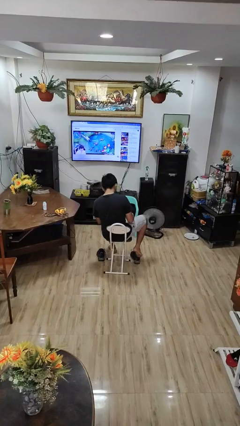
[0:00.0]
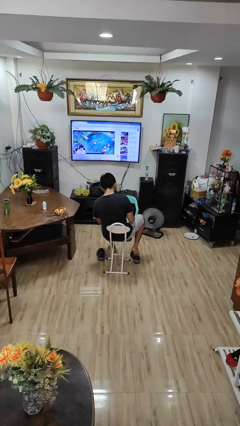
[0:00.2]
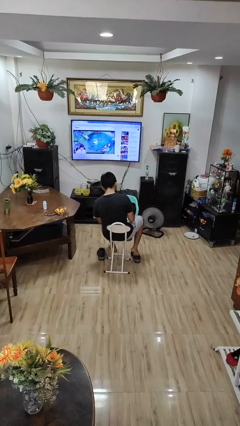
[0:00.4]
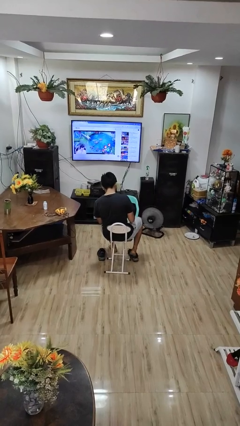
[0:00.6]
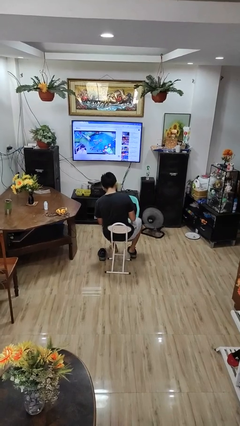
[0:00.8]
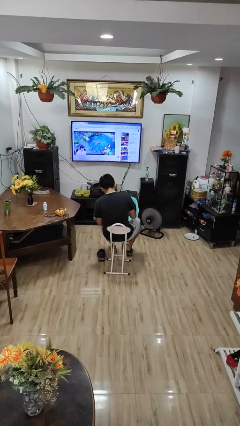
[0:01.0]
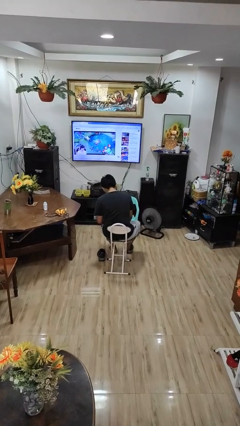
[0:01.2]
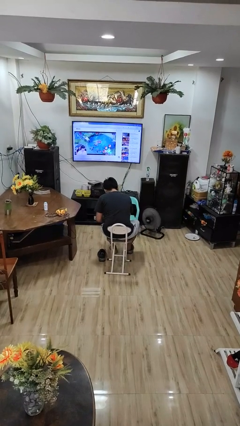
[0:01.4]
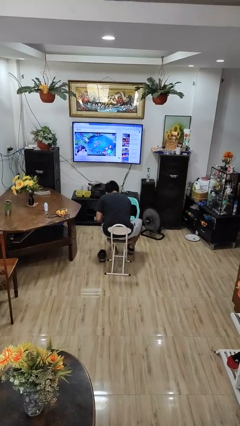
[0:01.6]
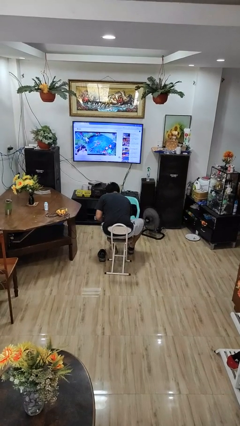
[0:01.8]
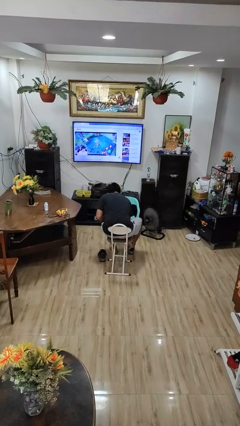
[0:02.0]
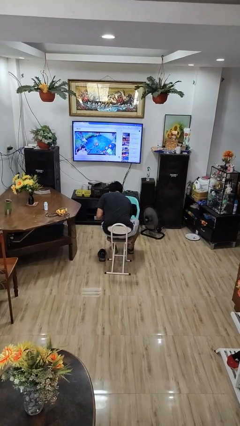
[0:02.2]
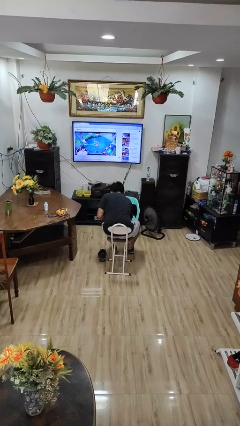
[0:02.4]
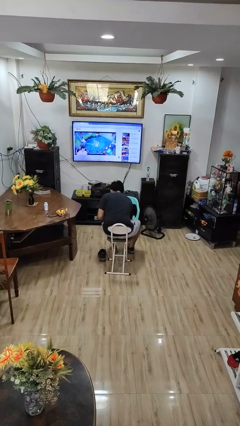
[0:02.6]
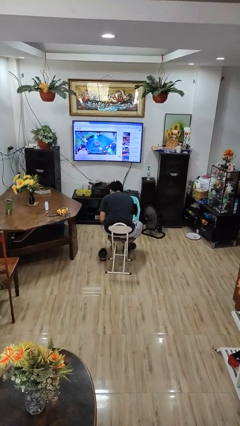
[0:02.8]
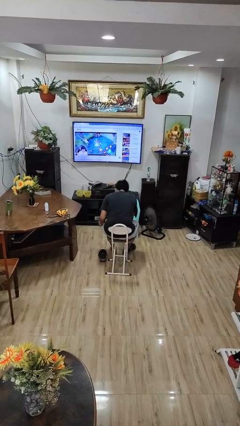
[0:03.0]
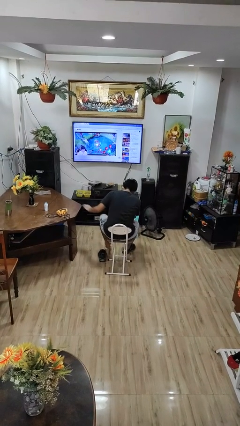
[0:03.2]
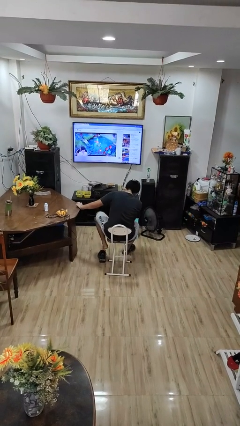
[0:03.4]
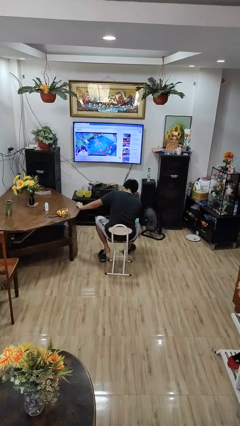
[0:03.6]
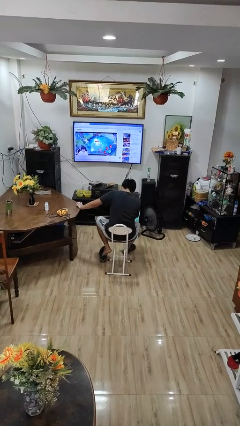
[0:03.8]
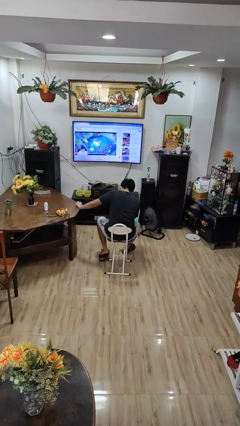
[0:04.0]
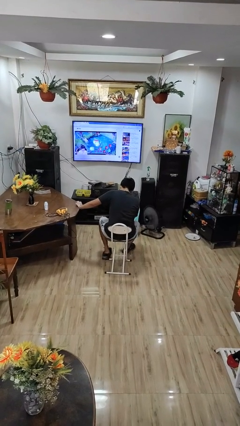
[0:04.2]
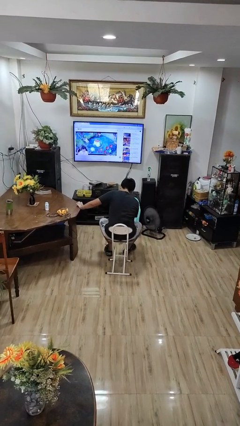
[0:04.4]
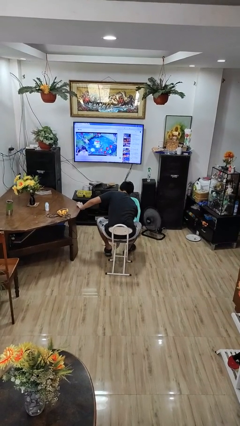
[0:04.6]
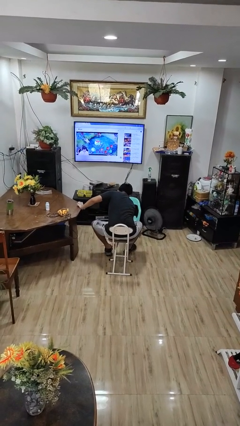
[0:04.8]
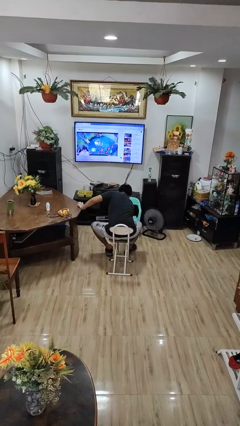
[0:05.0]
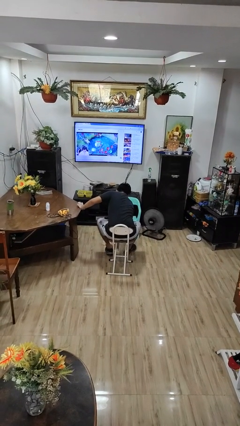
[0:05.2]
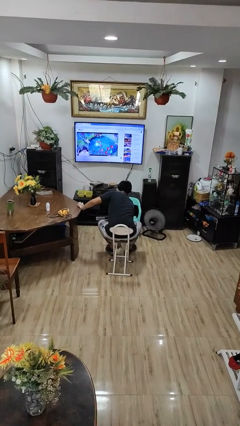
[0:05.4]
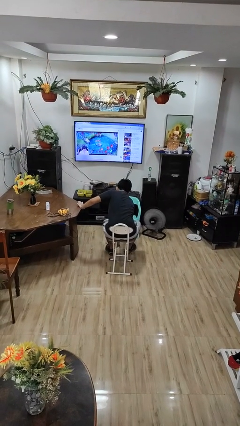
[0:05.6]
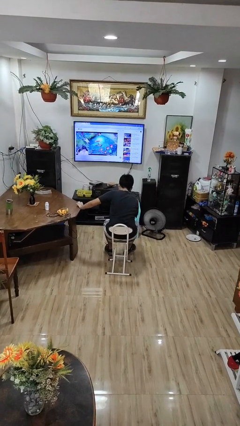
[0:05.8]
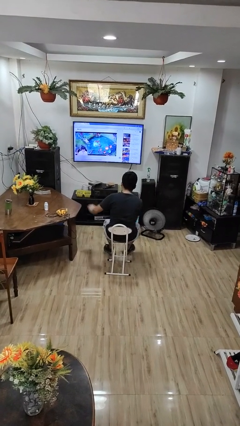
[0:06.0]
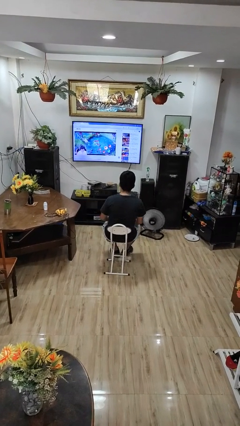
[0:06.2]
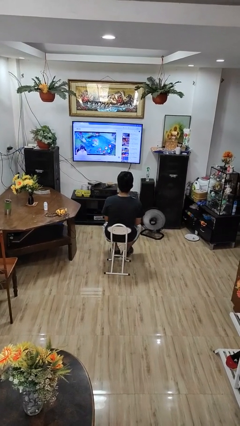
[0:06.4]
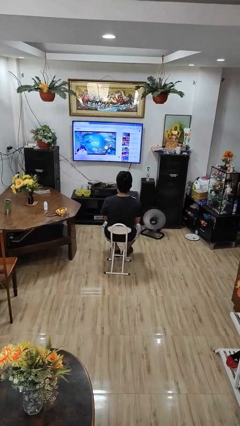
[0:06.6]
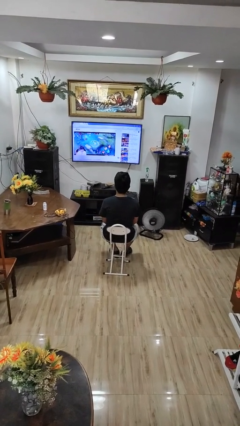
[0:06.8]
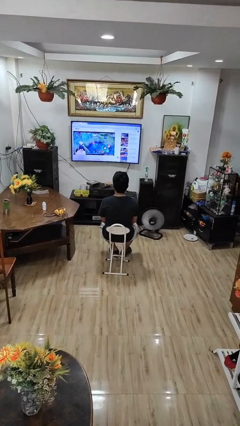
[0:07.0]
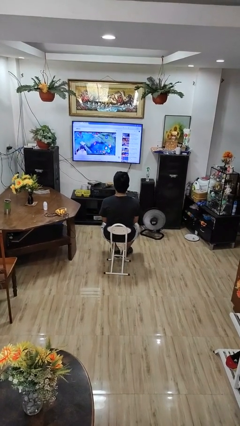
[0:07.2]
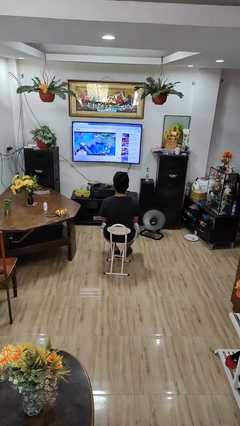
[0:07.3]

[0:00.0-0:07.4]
person puts on shoes

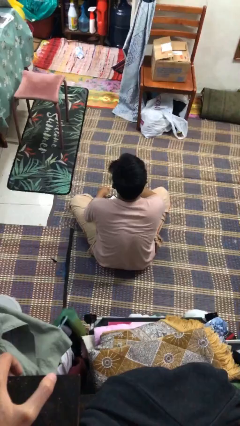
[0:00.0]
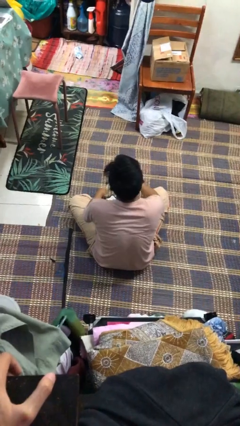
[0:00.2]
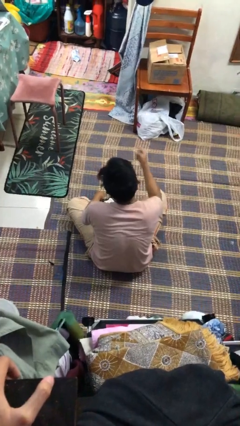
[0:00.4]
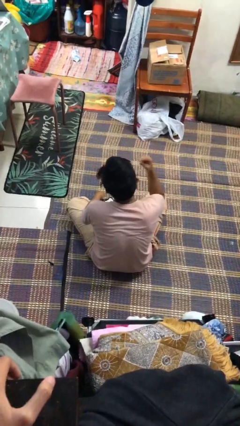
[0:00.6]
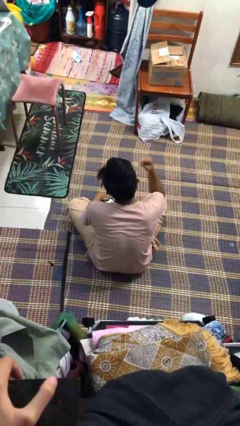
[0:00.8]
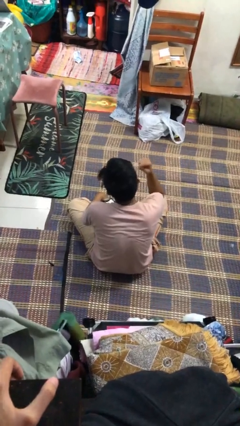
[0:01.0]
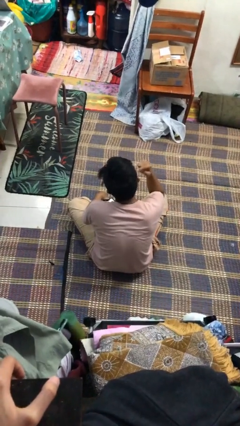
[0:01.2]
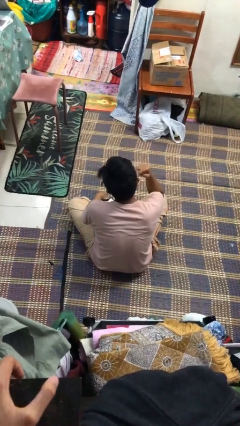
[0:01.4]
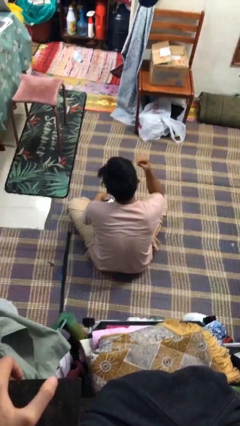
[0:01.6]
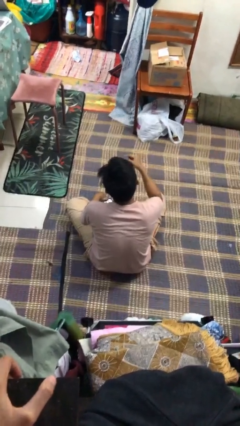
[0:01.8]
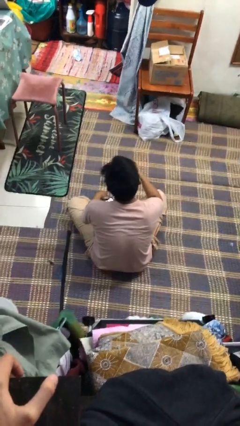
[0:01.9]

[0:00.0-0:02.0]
person gestures listen closely

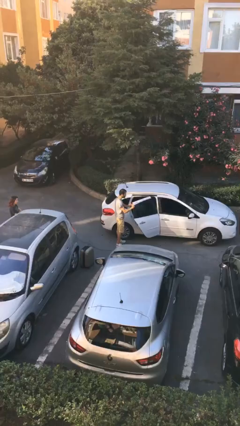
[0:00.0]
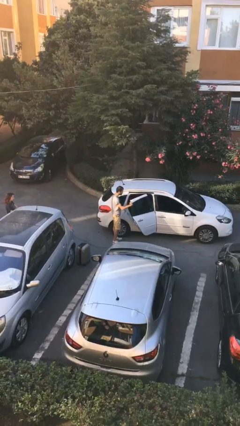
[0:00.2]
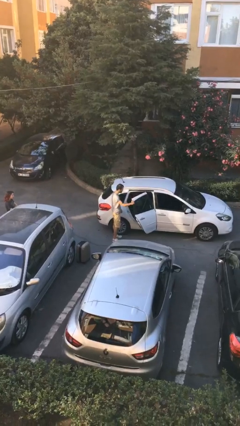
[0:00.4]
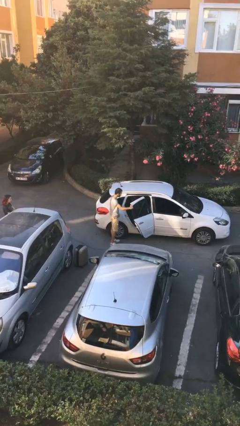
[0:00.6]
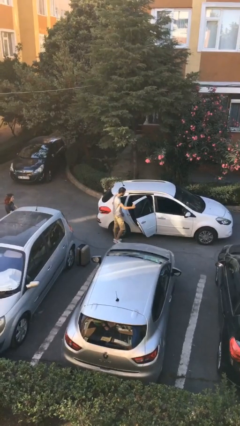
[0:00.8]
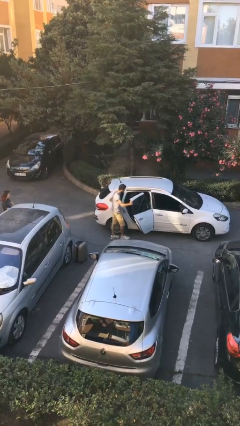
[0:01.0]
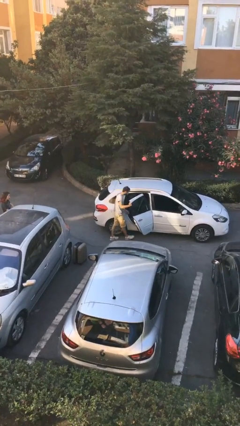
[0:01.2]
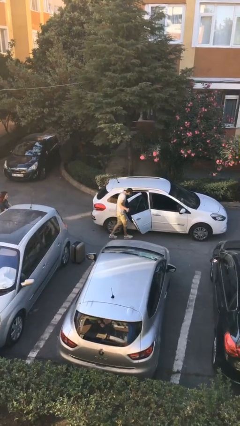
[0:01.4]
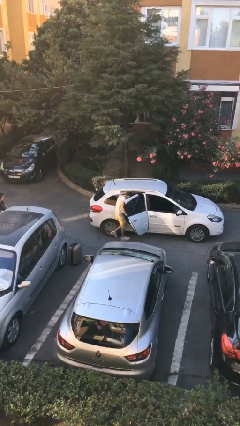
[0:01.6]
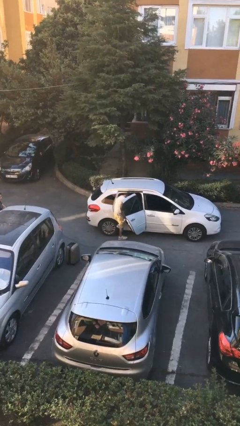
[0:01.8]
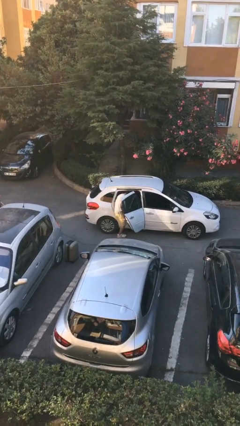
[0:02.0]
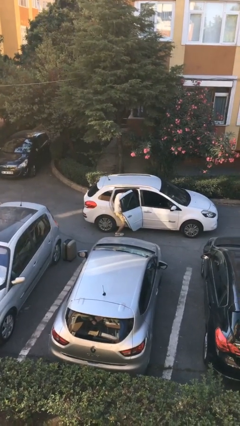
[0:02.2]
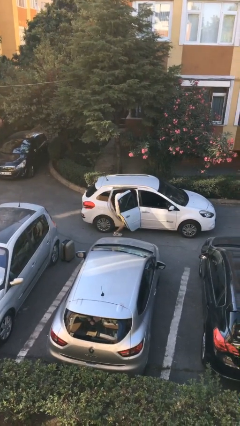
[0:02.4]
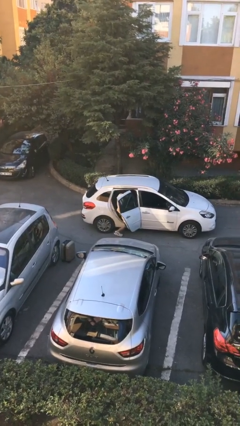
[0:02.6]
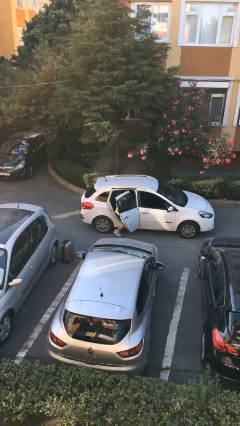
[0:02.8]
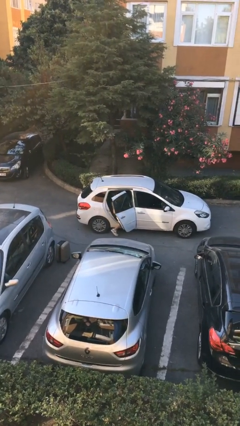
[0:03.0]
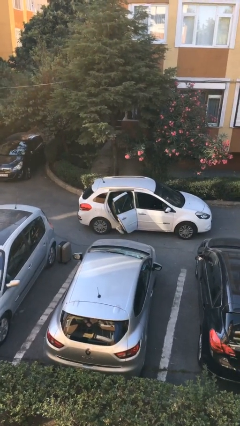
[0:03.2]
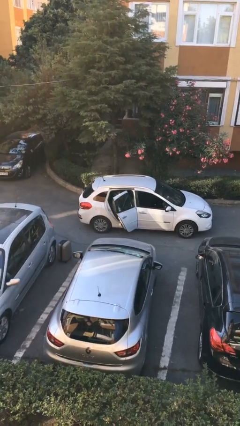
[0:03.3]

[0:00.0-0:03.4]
person enters car

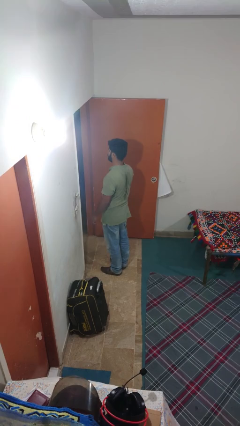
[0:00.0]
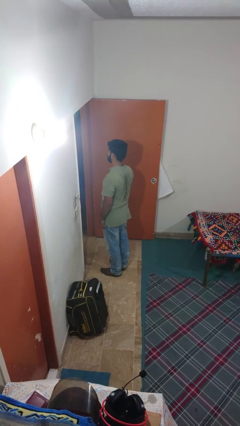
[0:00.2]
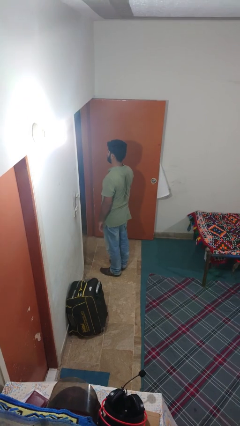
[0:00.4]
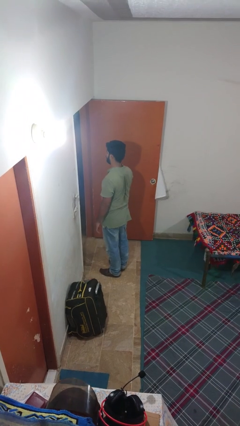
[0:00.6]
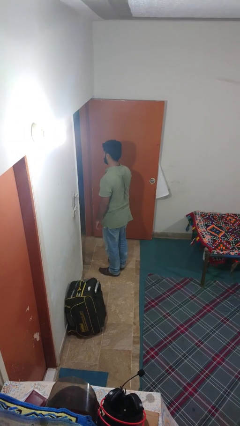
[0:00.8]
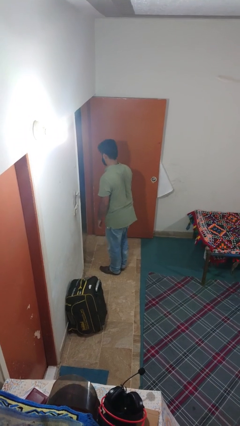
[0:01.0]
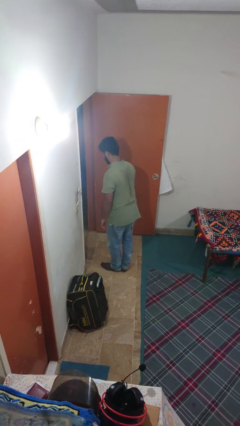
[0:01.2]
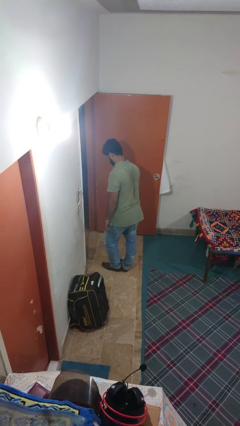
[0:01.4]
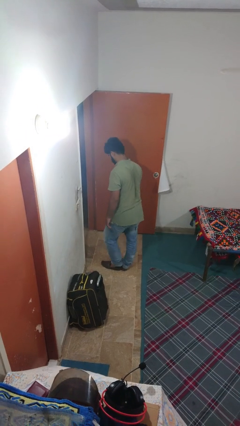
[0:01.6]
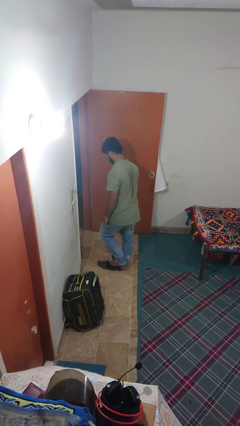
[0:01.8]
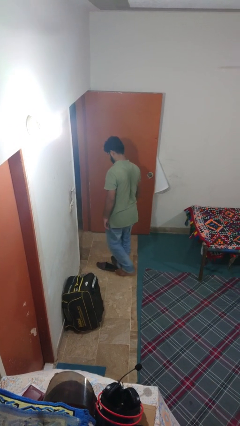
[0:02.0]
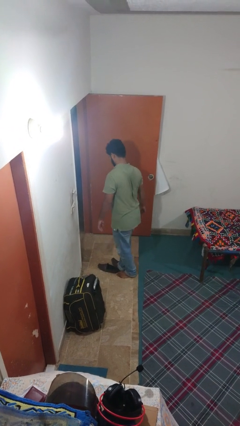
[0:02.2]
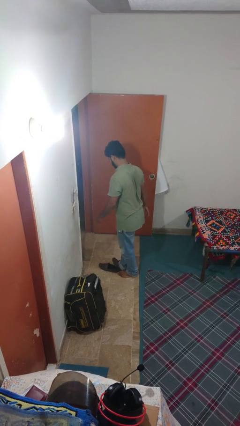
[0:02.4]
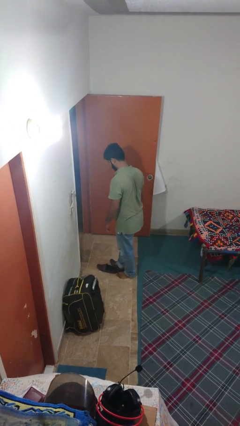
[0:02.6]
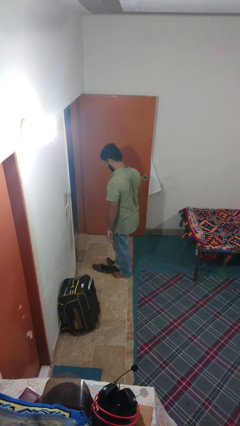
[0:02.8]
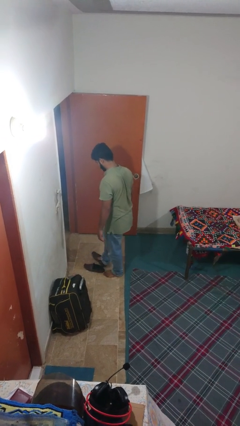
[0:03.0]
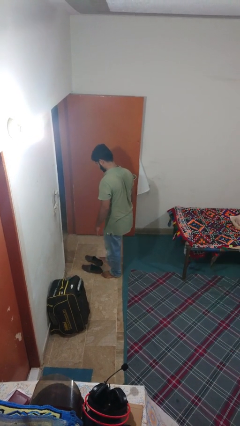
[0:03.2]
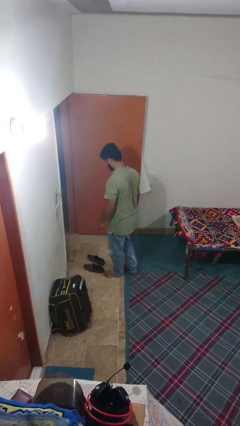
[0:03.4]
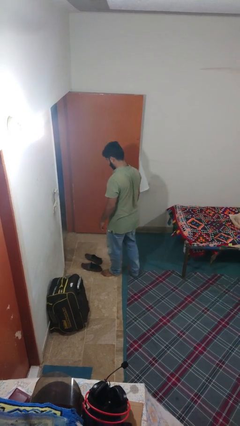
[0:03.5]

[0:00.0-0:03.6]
person takes off shoes

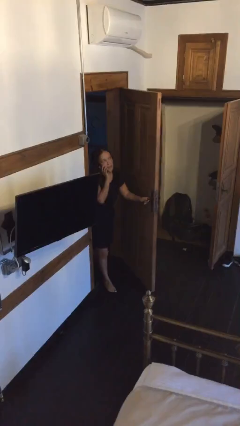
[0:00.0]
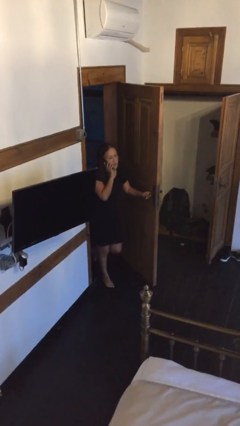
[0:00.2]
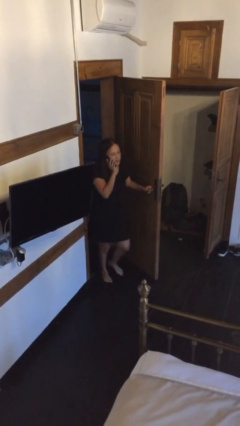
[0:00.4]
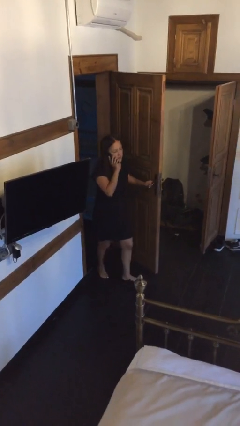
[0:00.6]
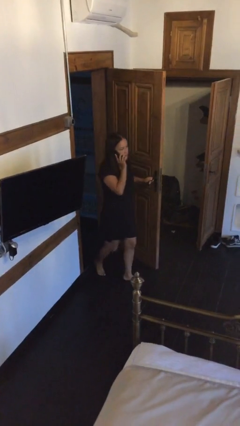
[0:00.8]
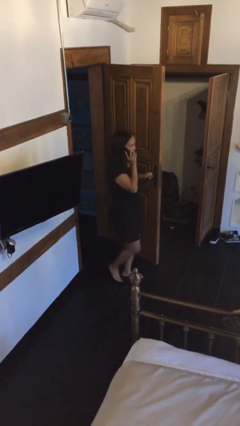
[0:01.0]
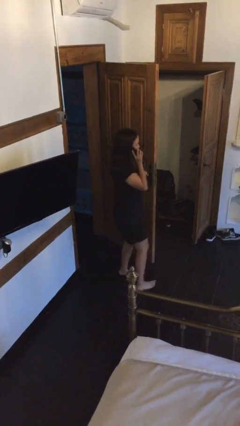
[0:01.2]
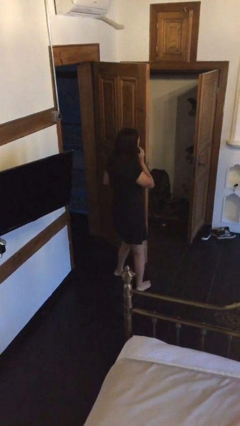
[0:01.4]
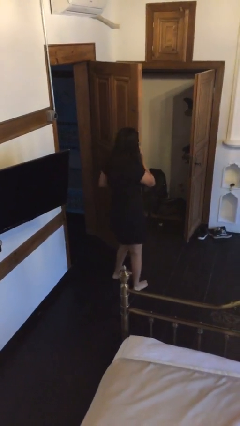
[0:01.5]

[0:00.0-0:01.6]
person enters scene through structure
